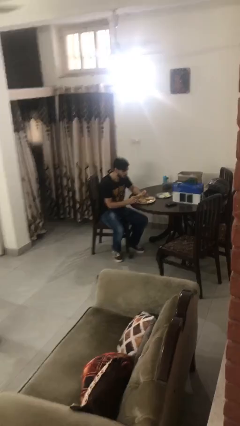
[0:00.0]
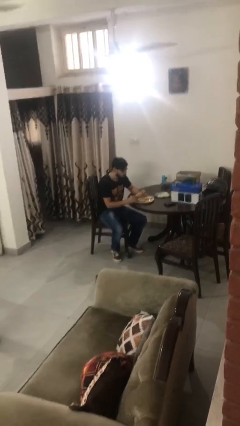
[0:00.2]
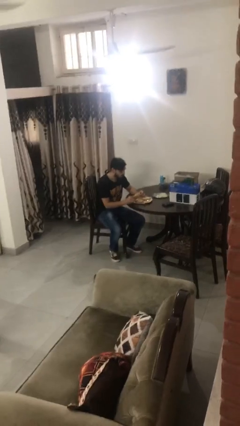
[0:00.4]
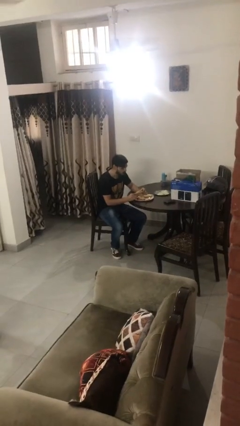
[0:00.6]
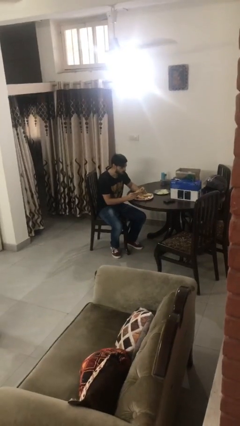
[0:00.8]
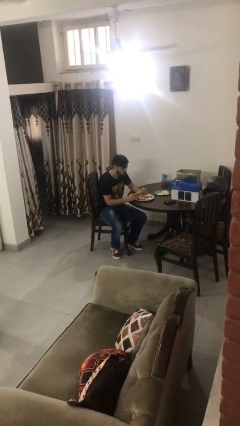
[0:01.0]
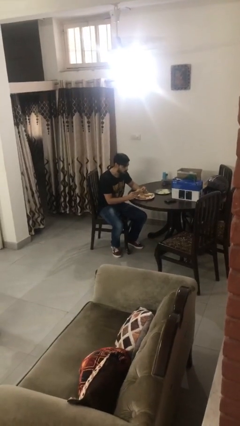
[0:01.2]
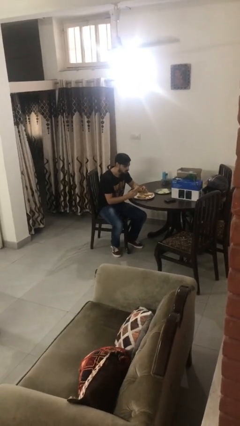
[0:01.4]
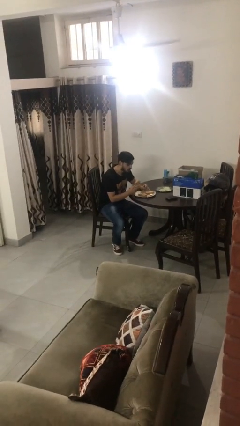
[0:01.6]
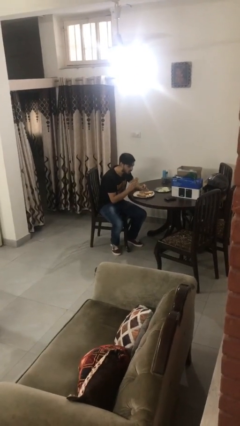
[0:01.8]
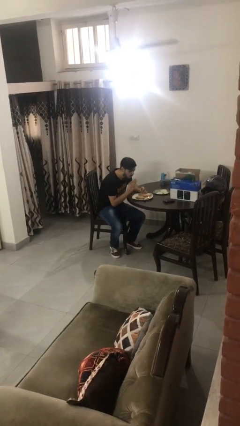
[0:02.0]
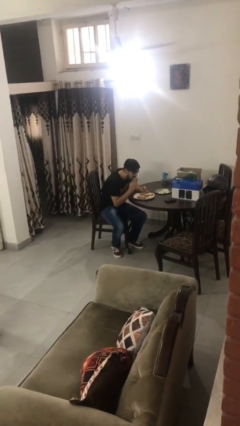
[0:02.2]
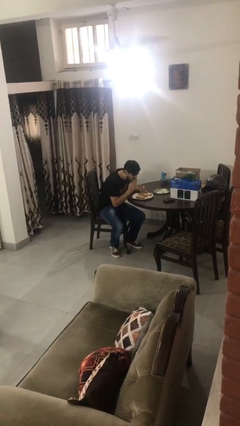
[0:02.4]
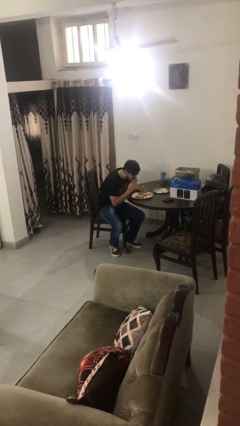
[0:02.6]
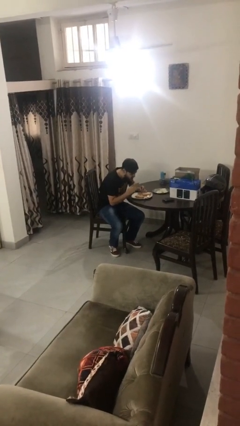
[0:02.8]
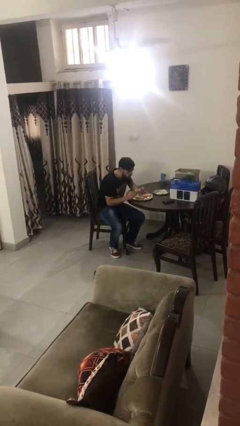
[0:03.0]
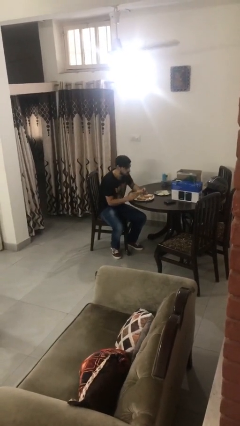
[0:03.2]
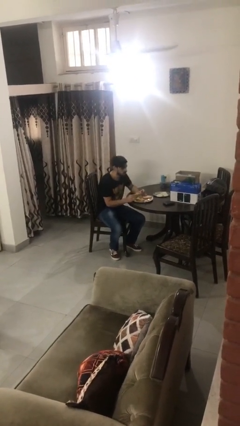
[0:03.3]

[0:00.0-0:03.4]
person eats with hands

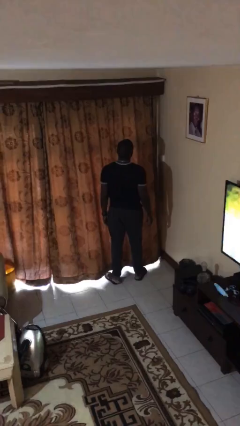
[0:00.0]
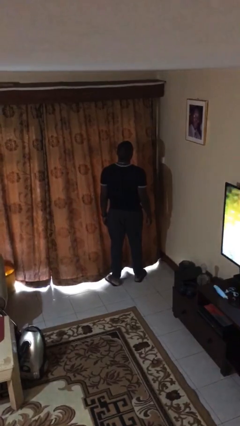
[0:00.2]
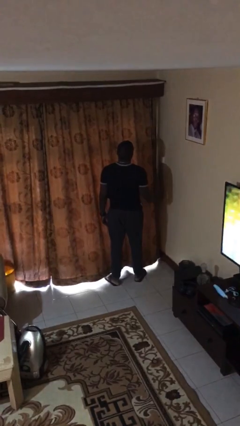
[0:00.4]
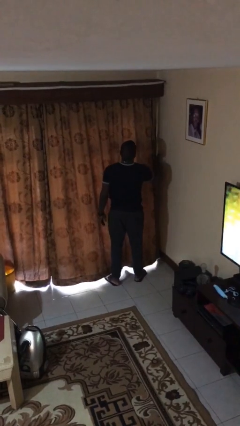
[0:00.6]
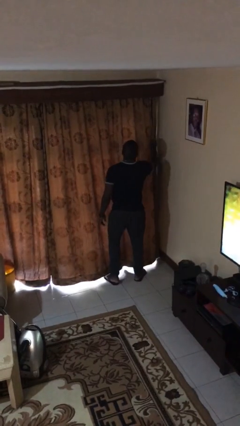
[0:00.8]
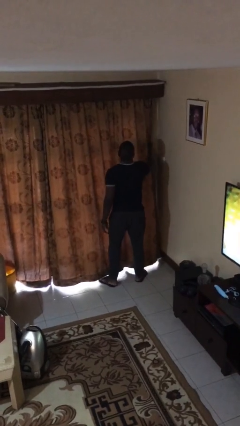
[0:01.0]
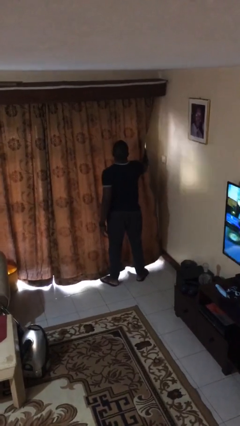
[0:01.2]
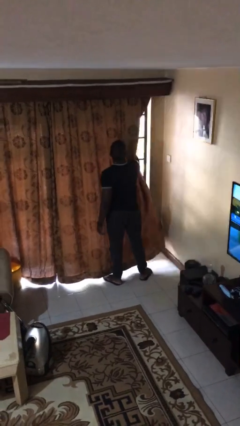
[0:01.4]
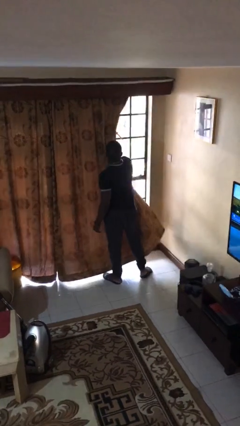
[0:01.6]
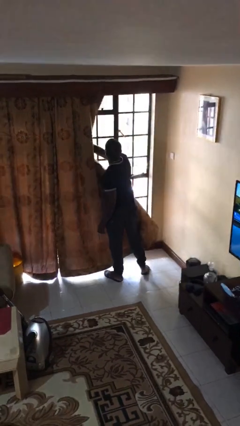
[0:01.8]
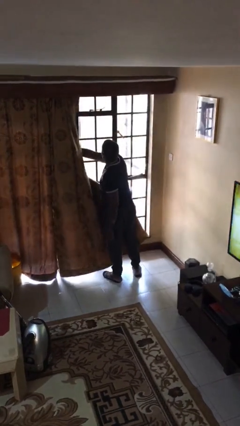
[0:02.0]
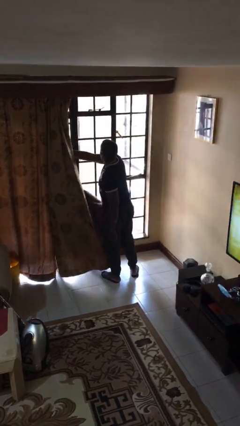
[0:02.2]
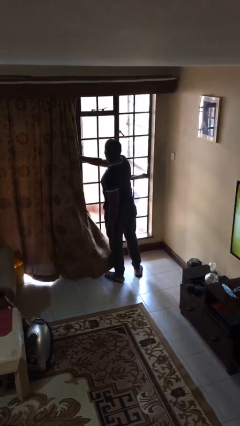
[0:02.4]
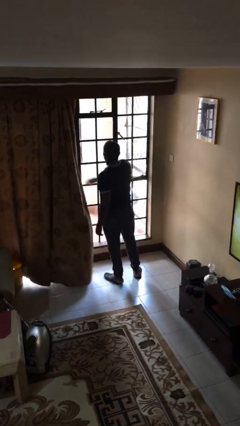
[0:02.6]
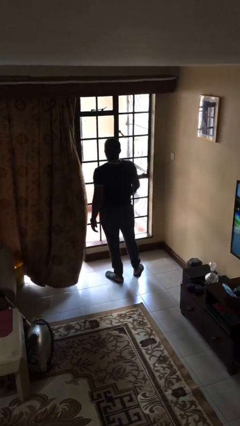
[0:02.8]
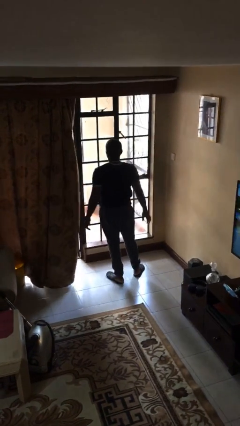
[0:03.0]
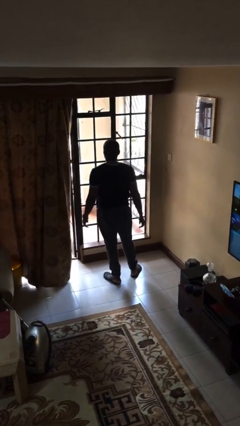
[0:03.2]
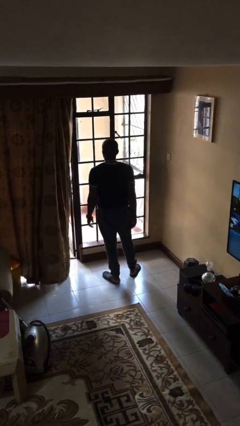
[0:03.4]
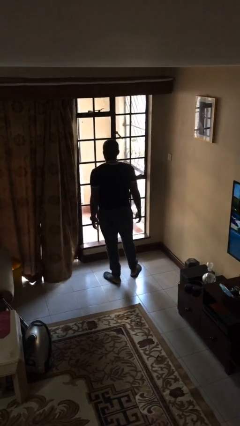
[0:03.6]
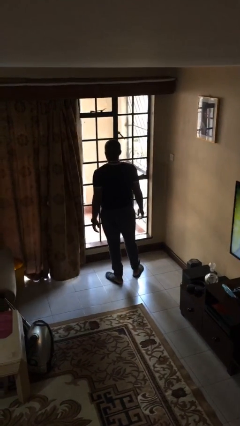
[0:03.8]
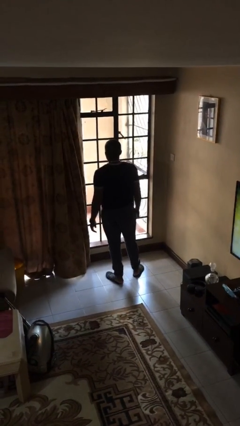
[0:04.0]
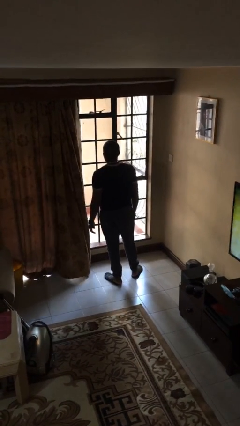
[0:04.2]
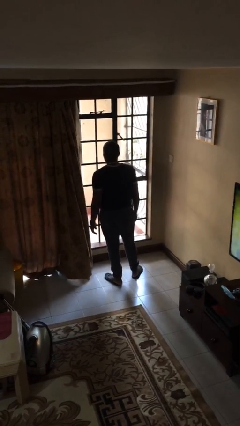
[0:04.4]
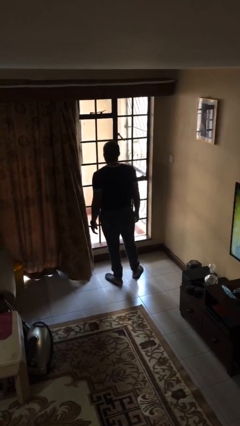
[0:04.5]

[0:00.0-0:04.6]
person opens curtains

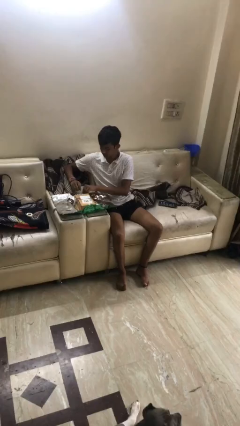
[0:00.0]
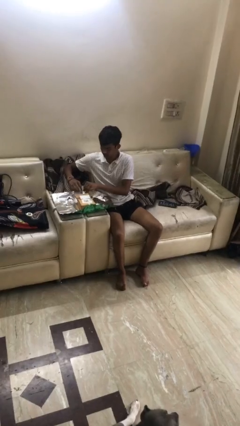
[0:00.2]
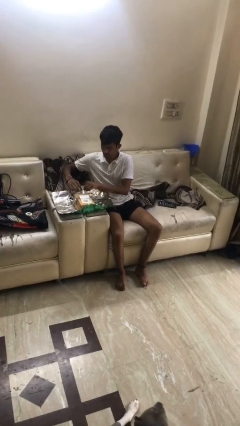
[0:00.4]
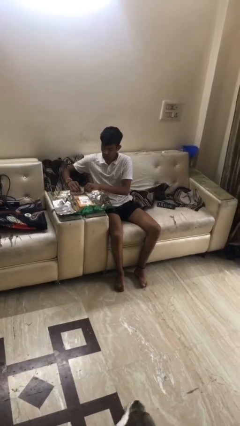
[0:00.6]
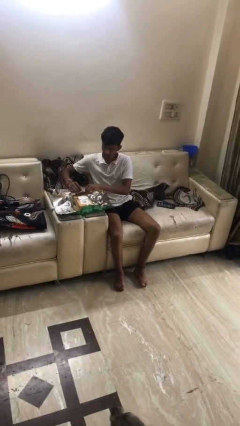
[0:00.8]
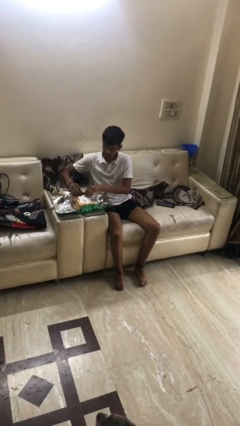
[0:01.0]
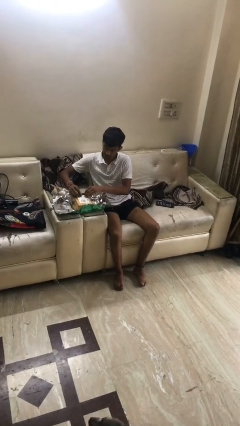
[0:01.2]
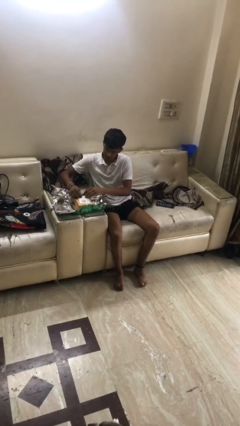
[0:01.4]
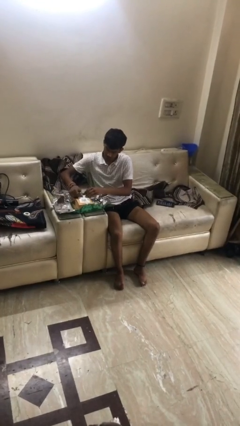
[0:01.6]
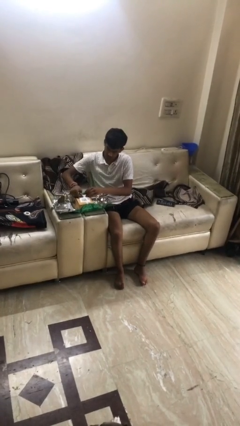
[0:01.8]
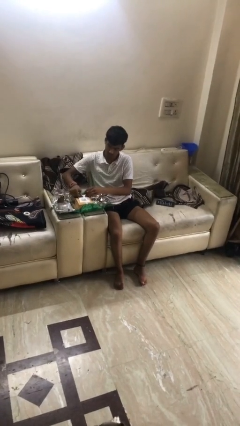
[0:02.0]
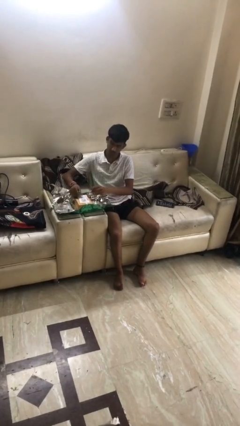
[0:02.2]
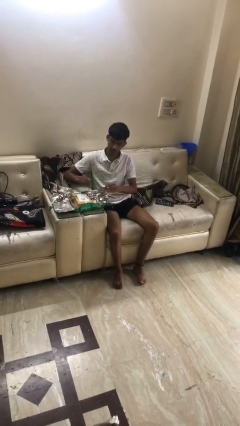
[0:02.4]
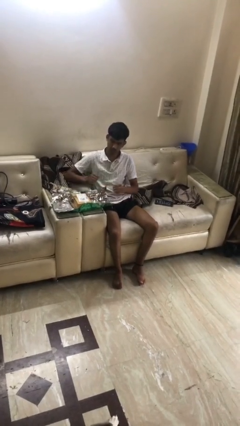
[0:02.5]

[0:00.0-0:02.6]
person wraps box

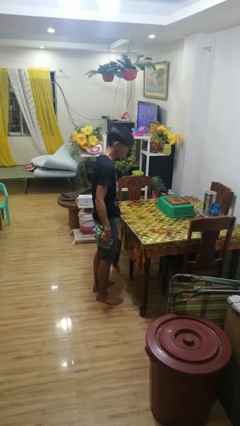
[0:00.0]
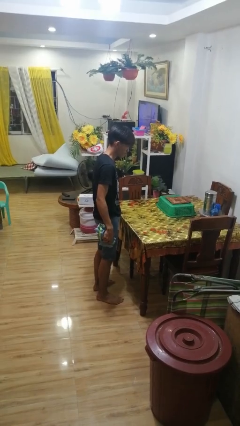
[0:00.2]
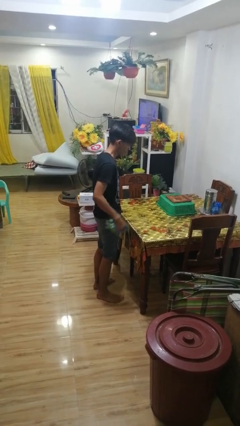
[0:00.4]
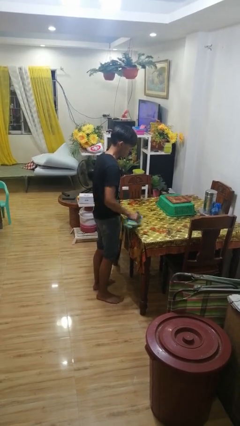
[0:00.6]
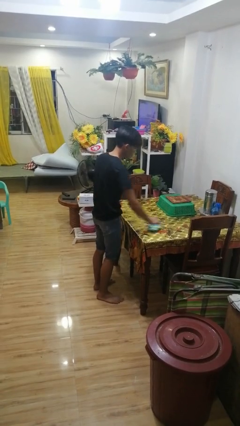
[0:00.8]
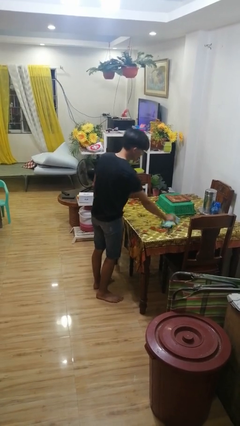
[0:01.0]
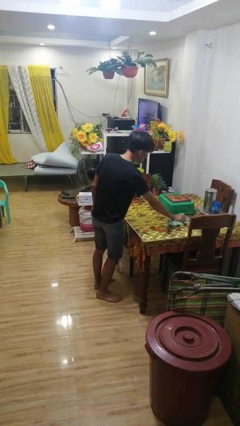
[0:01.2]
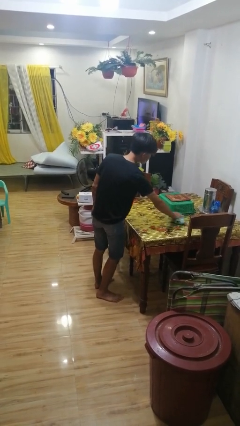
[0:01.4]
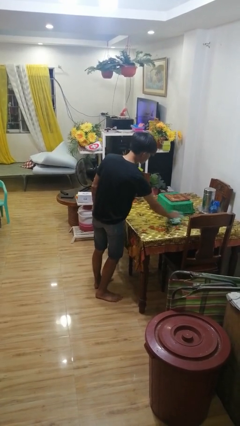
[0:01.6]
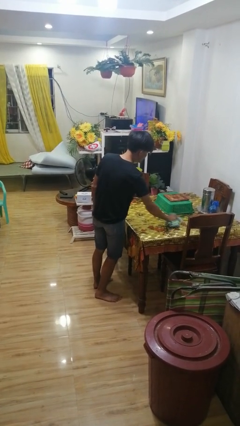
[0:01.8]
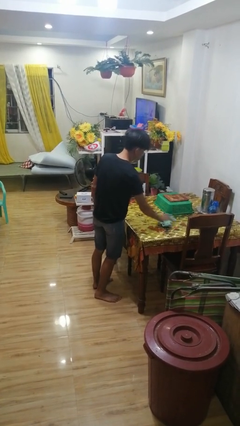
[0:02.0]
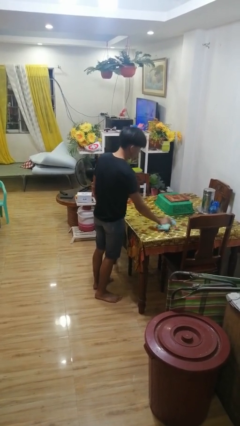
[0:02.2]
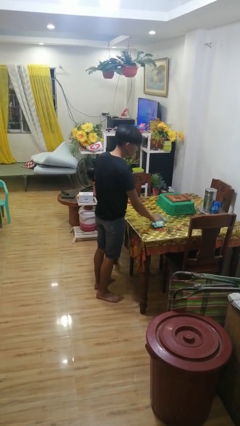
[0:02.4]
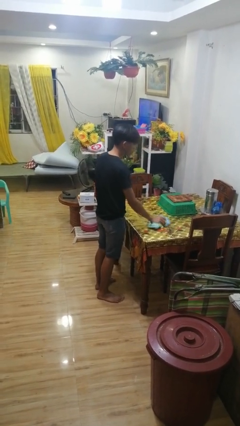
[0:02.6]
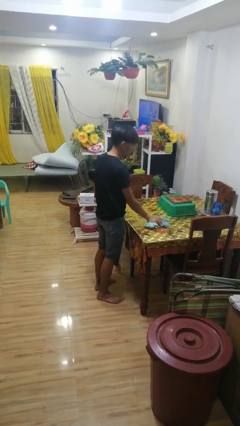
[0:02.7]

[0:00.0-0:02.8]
person cleans table with rag

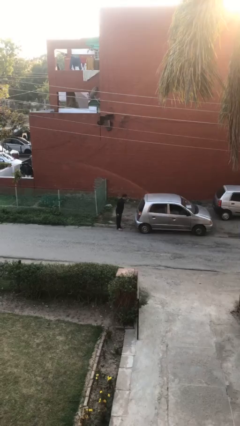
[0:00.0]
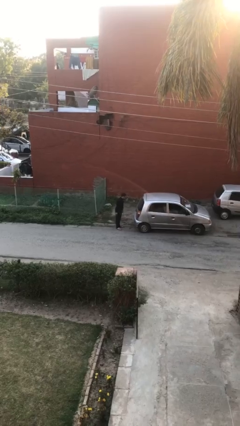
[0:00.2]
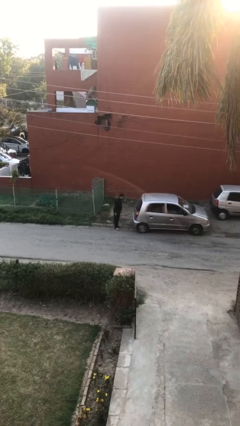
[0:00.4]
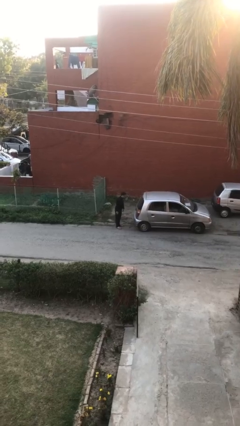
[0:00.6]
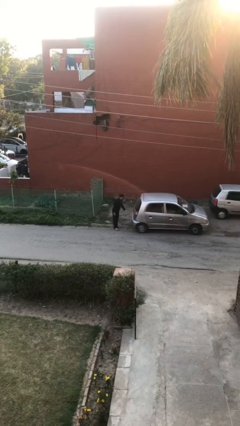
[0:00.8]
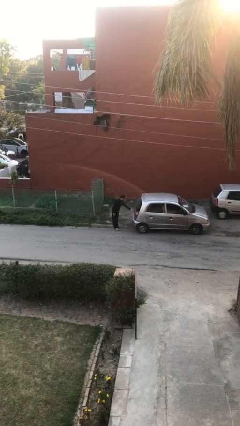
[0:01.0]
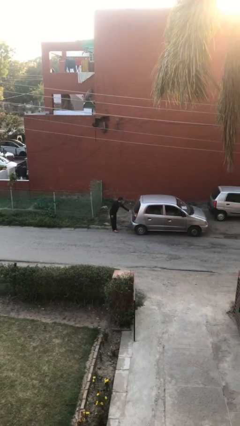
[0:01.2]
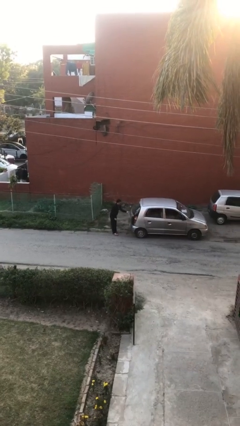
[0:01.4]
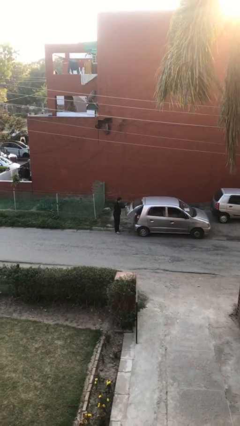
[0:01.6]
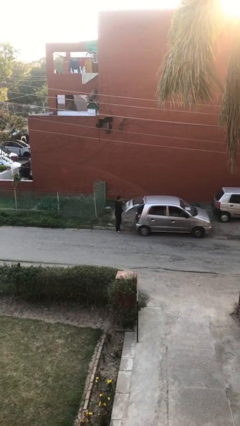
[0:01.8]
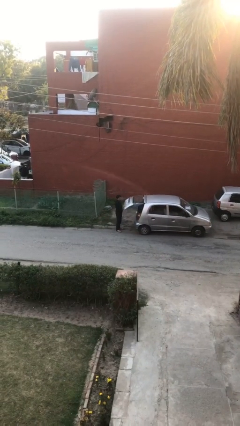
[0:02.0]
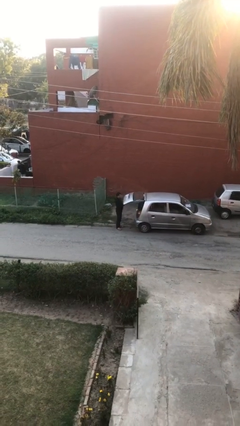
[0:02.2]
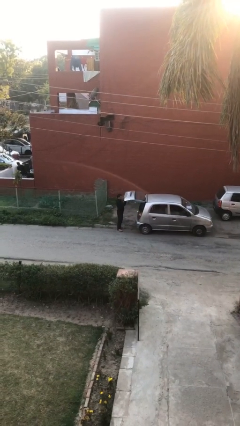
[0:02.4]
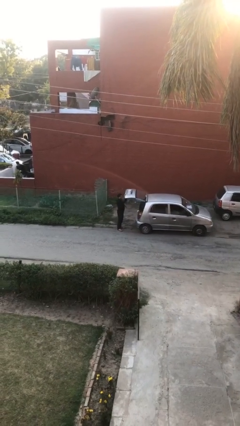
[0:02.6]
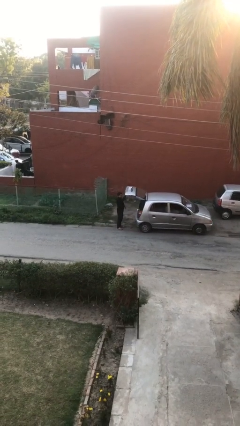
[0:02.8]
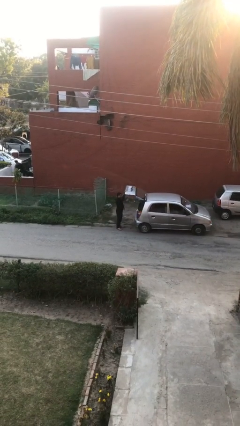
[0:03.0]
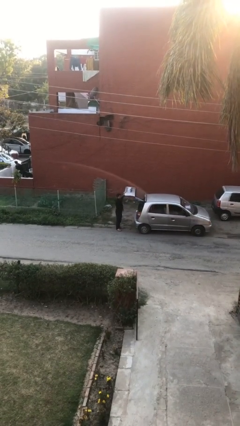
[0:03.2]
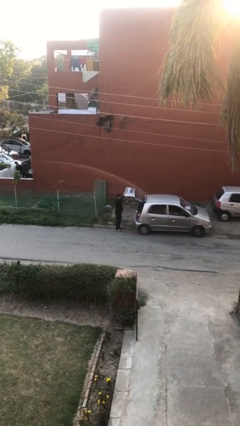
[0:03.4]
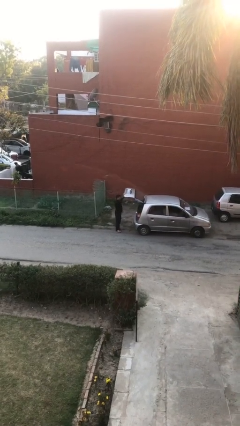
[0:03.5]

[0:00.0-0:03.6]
person opens car trunk

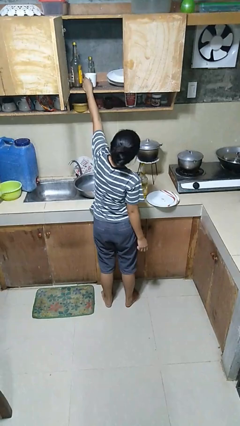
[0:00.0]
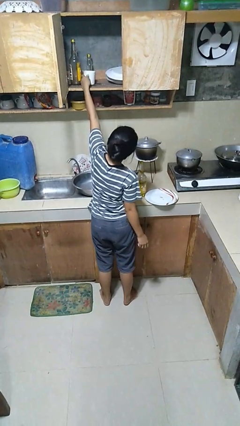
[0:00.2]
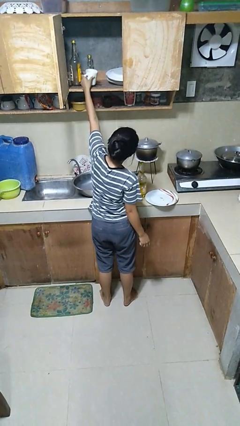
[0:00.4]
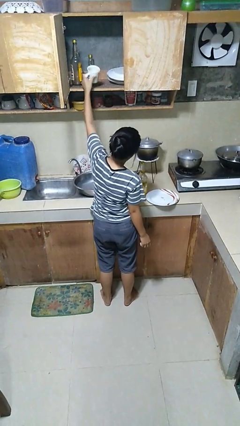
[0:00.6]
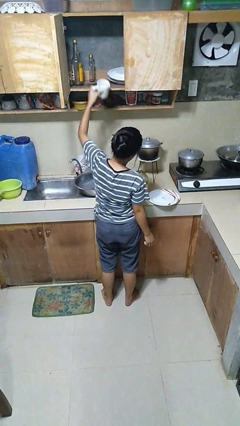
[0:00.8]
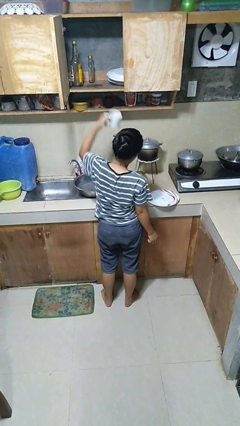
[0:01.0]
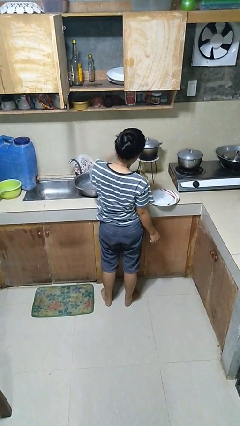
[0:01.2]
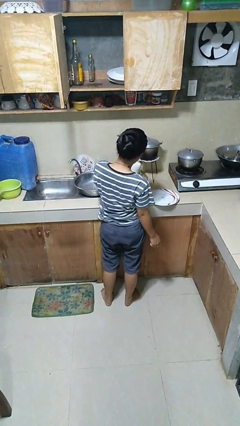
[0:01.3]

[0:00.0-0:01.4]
person takes object from cabinet
